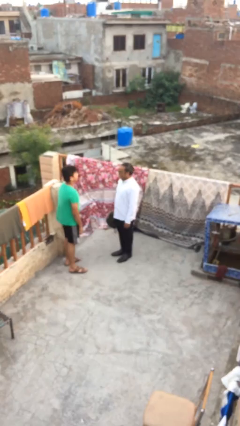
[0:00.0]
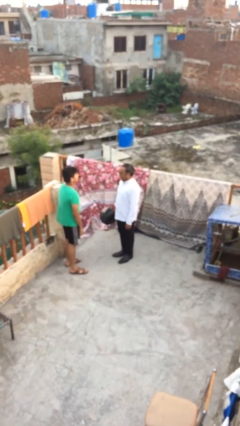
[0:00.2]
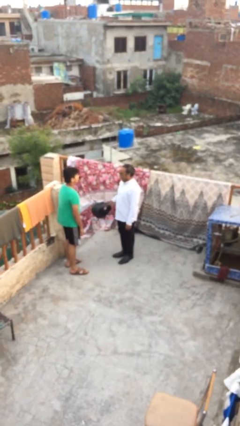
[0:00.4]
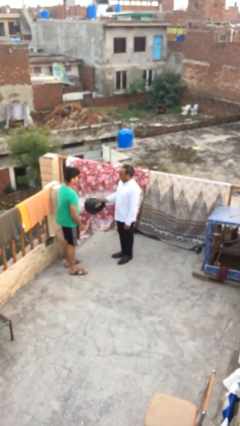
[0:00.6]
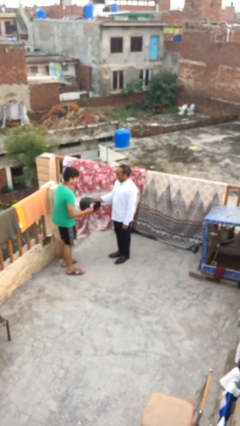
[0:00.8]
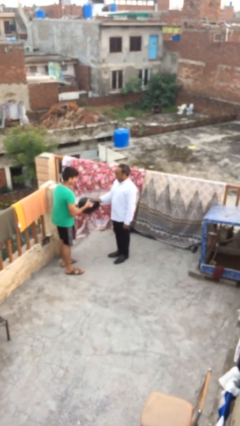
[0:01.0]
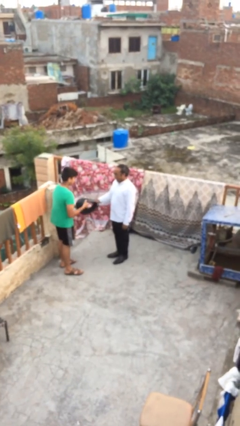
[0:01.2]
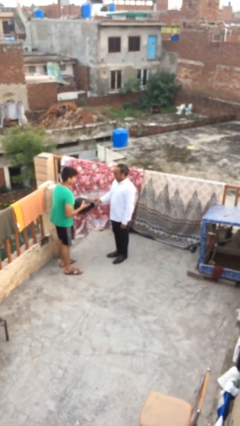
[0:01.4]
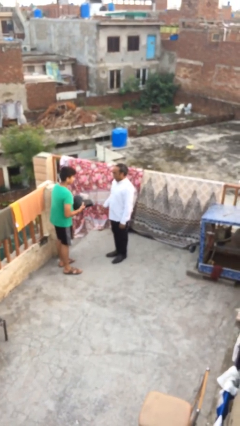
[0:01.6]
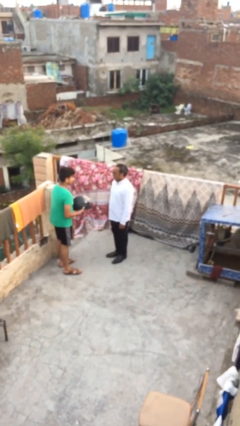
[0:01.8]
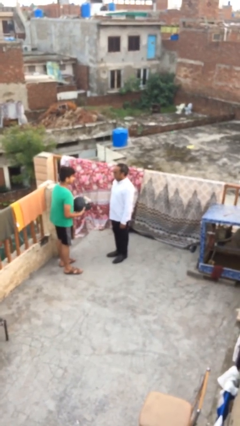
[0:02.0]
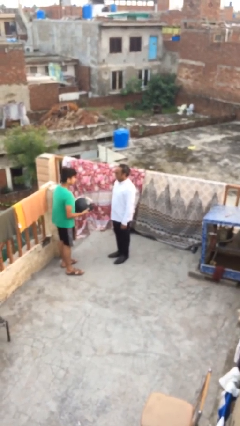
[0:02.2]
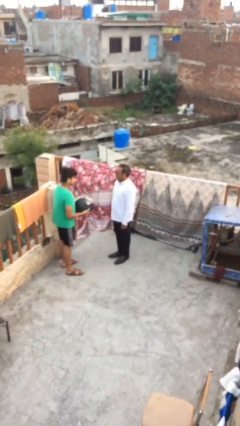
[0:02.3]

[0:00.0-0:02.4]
person transfers object to person

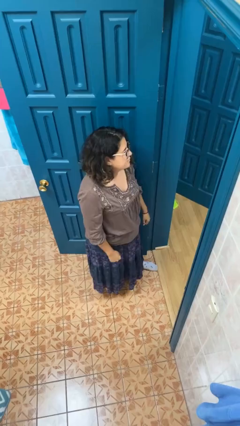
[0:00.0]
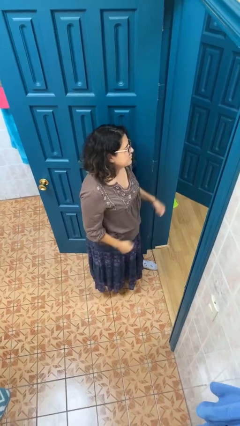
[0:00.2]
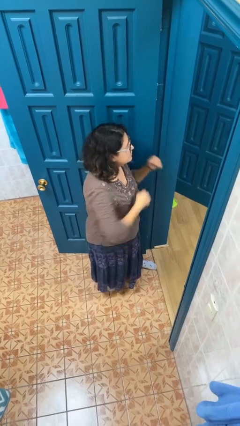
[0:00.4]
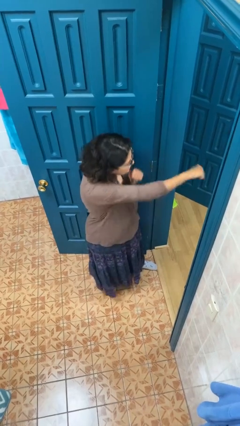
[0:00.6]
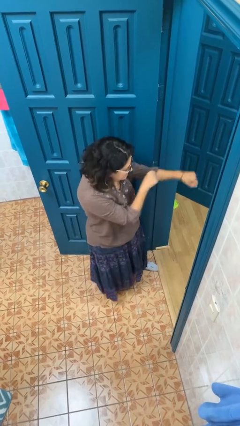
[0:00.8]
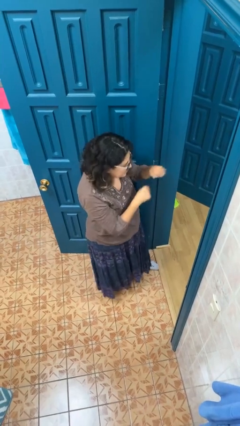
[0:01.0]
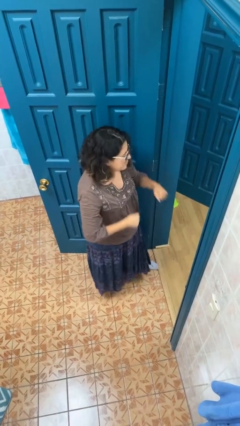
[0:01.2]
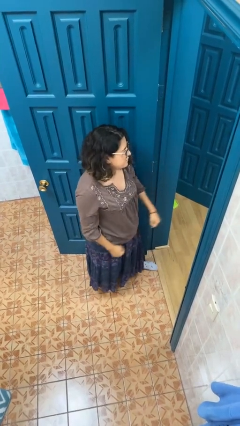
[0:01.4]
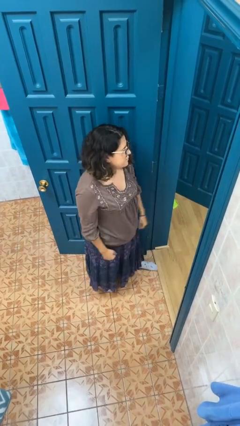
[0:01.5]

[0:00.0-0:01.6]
person punches

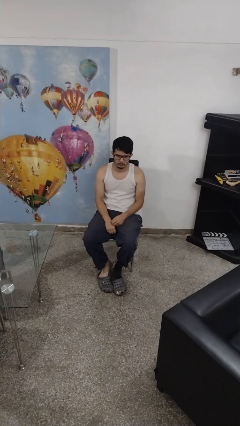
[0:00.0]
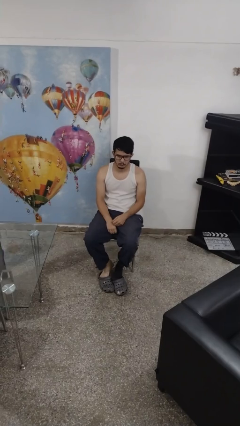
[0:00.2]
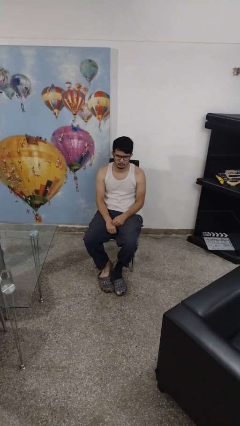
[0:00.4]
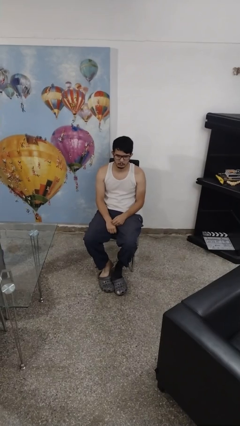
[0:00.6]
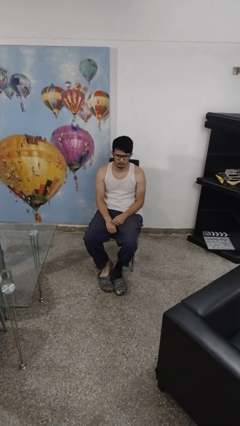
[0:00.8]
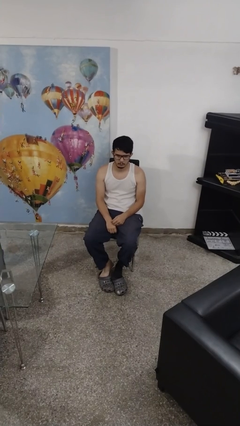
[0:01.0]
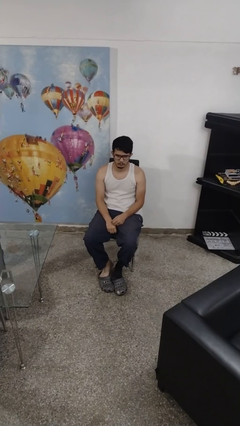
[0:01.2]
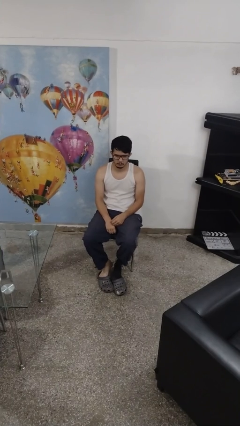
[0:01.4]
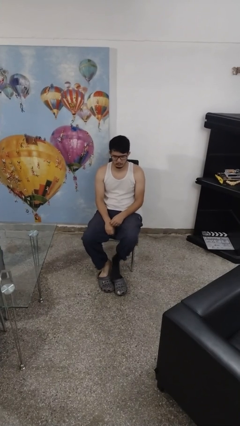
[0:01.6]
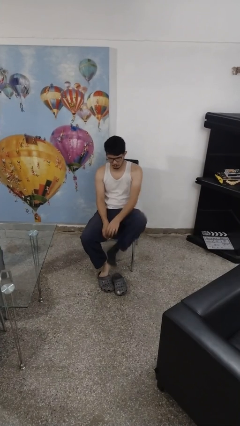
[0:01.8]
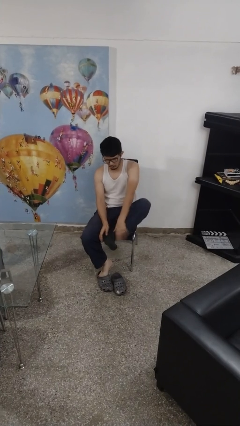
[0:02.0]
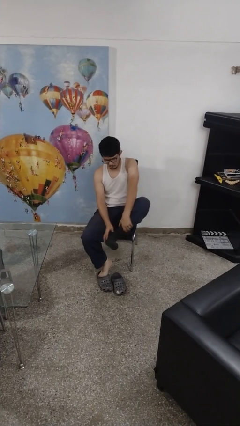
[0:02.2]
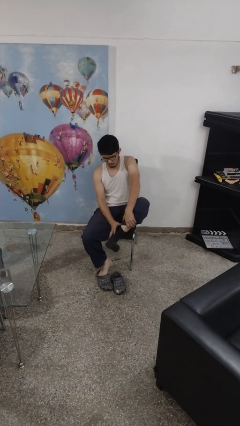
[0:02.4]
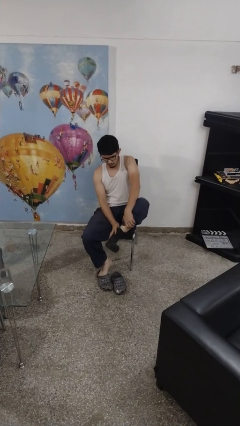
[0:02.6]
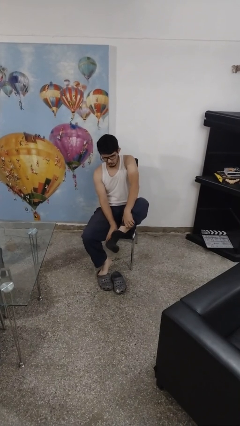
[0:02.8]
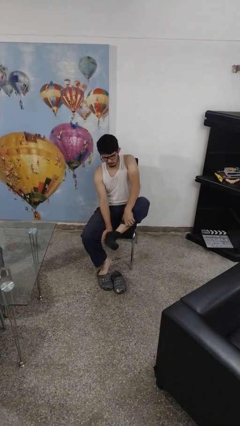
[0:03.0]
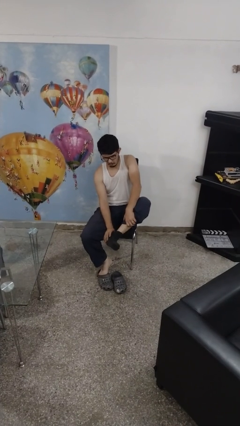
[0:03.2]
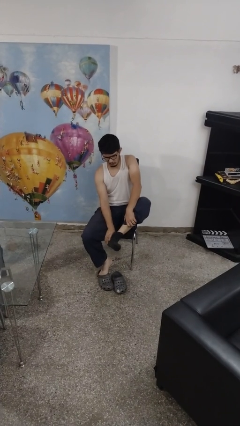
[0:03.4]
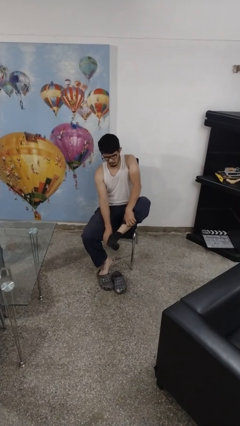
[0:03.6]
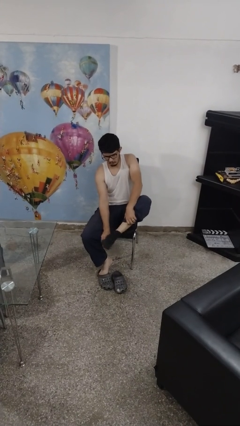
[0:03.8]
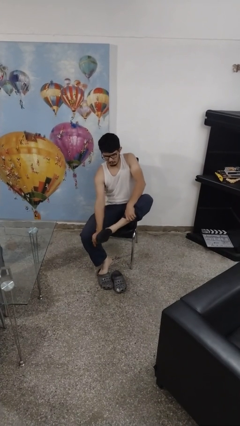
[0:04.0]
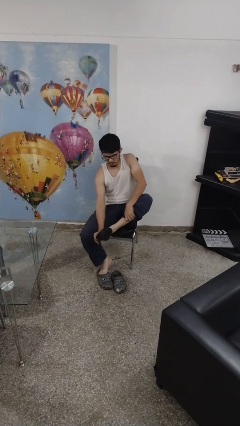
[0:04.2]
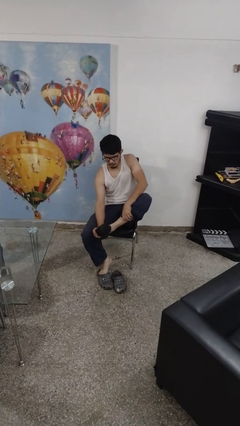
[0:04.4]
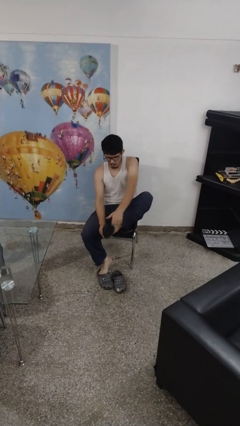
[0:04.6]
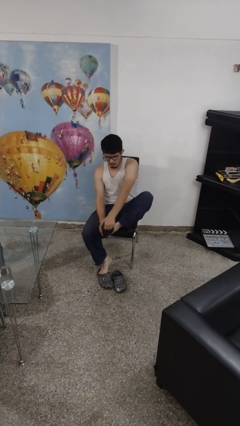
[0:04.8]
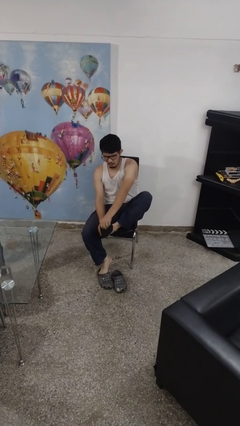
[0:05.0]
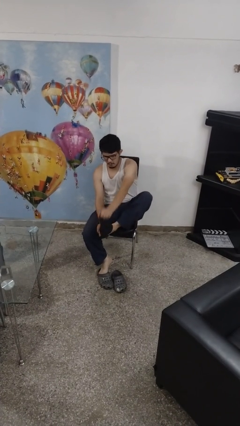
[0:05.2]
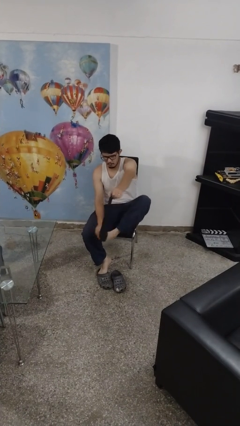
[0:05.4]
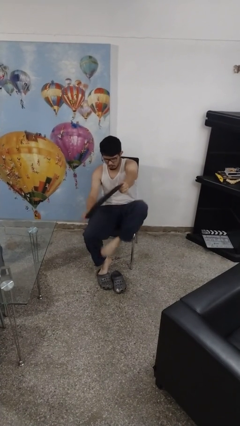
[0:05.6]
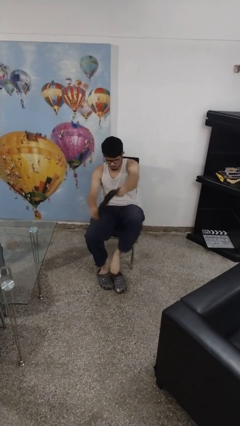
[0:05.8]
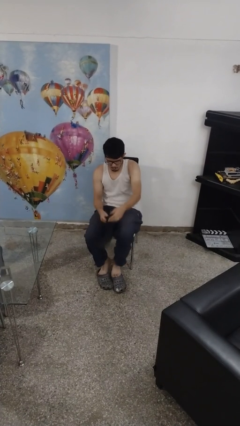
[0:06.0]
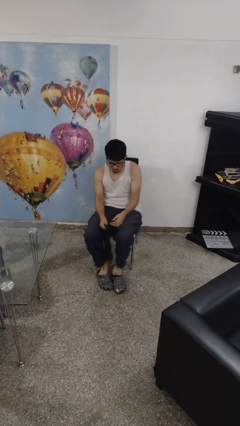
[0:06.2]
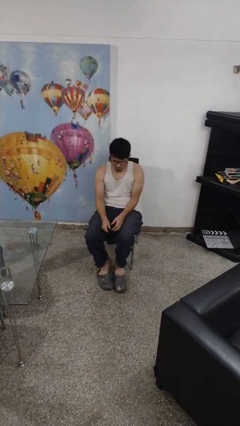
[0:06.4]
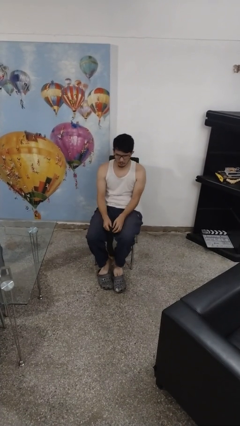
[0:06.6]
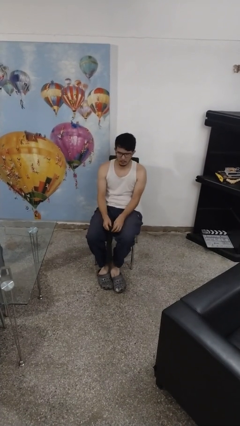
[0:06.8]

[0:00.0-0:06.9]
person takes off socks

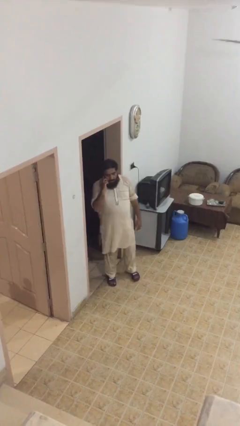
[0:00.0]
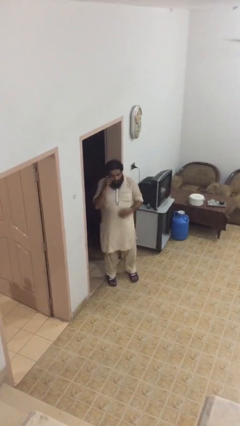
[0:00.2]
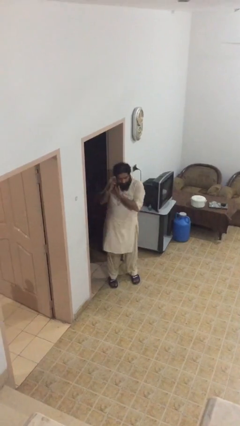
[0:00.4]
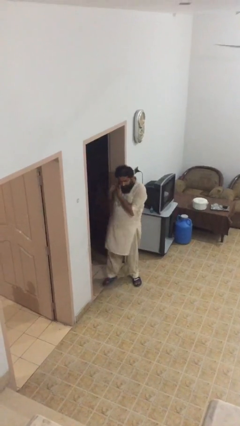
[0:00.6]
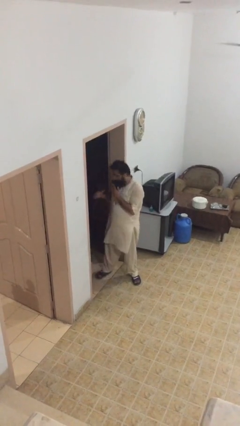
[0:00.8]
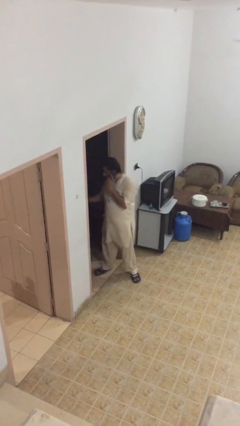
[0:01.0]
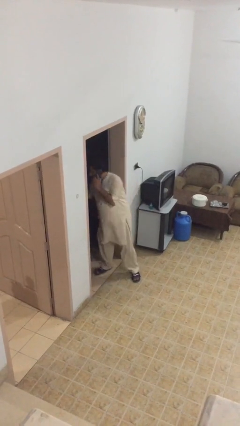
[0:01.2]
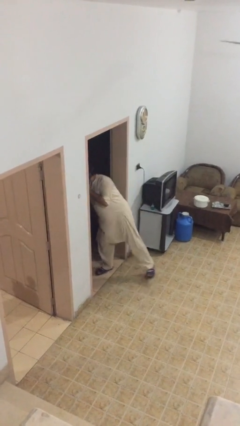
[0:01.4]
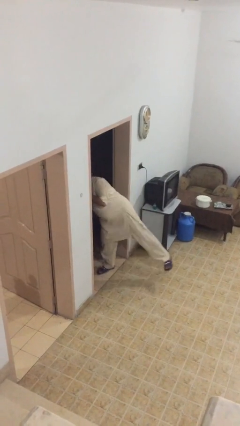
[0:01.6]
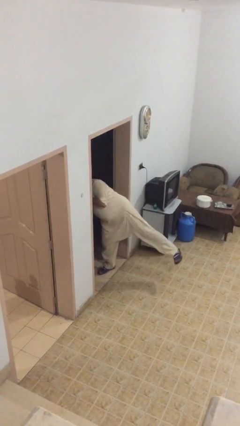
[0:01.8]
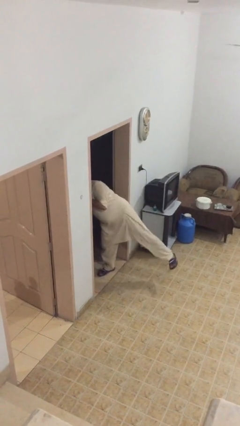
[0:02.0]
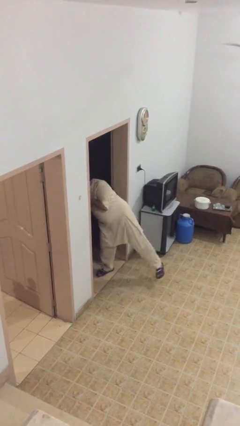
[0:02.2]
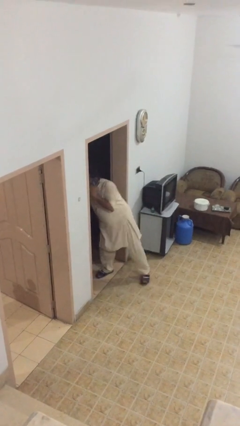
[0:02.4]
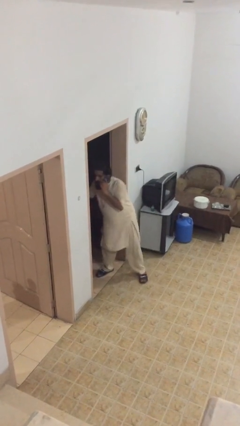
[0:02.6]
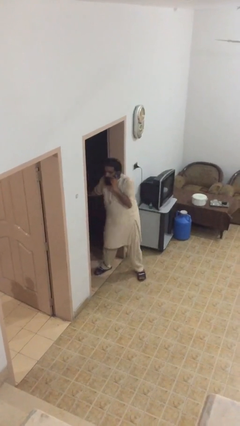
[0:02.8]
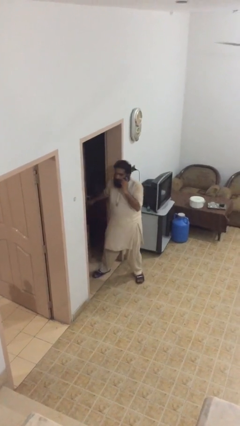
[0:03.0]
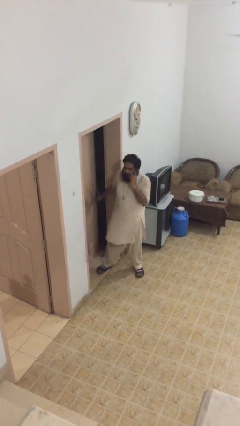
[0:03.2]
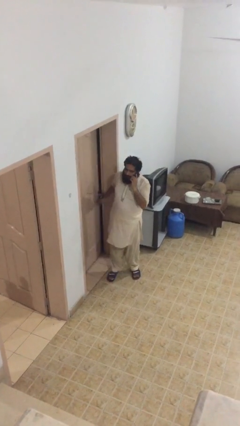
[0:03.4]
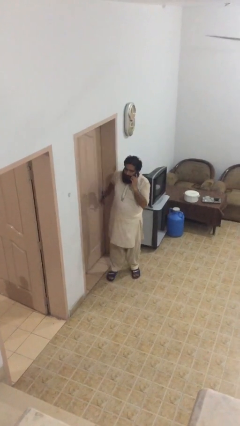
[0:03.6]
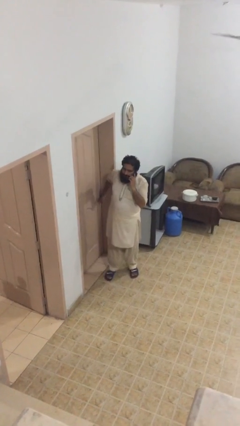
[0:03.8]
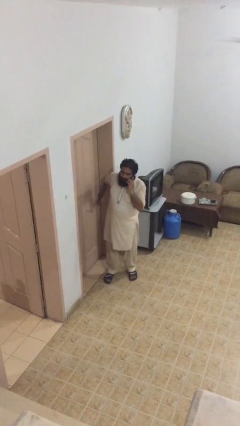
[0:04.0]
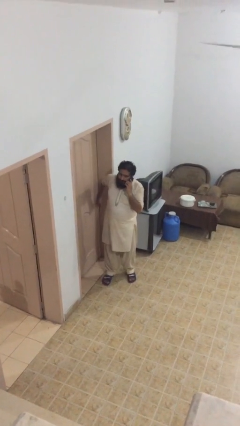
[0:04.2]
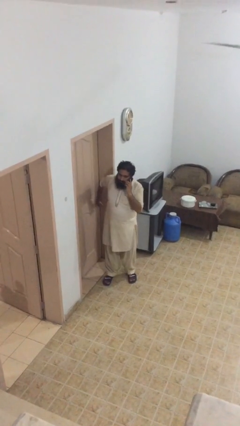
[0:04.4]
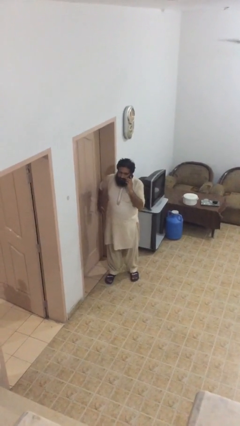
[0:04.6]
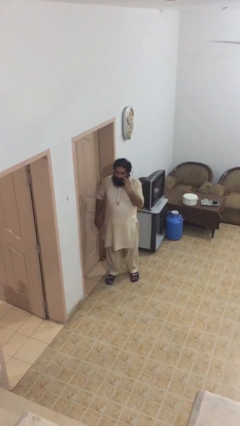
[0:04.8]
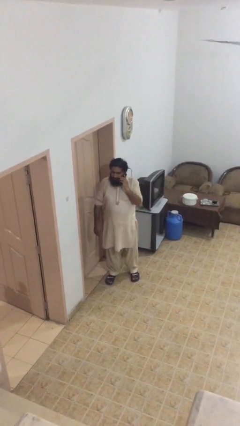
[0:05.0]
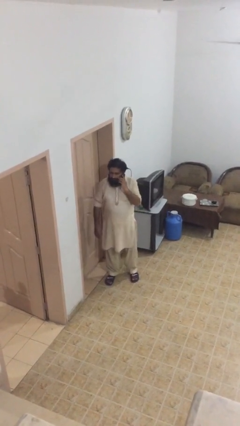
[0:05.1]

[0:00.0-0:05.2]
person closes facility door

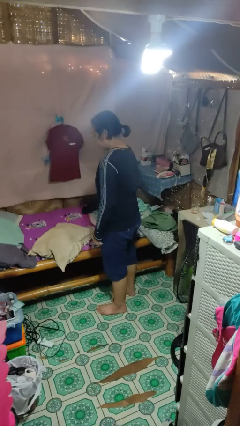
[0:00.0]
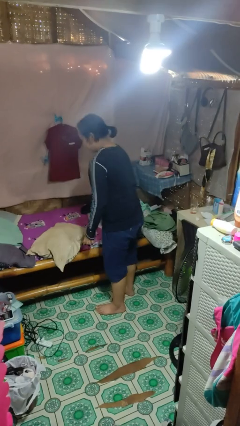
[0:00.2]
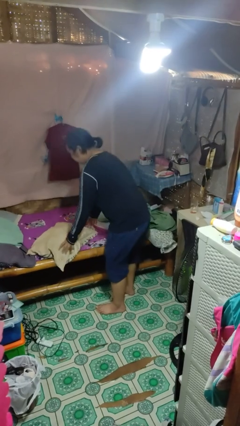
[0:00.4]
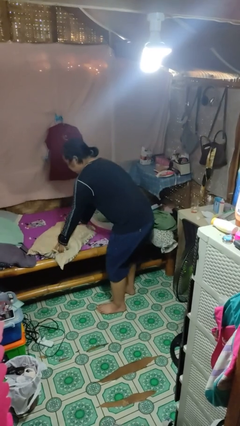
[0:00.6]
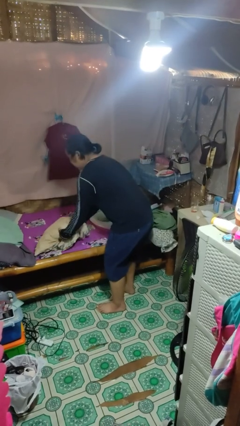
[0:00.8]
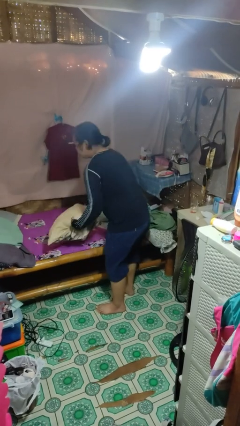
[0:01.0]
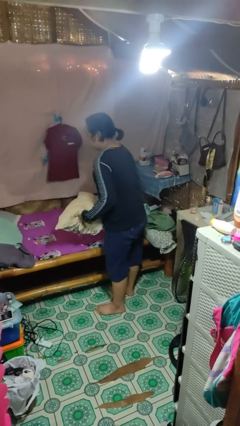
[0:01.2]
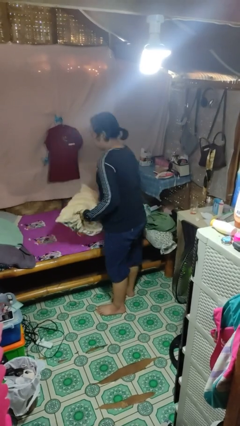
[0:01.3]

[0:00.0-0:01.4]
person picks up object from bed
